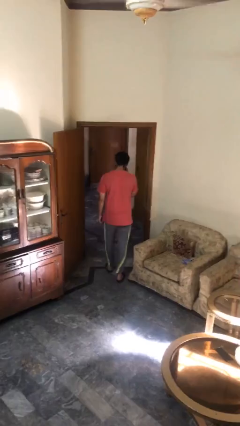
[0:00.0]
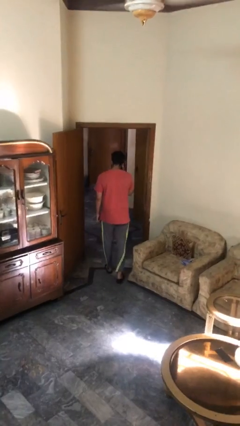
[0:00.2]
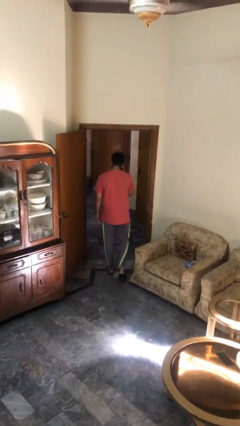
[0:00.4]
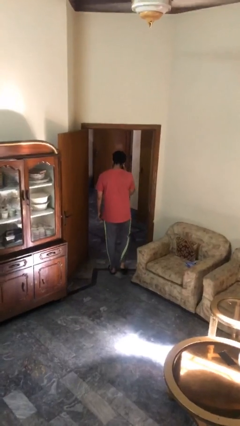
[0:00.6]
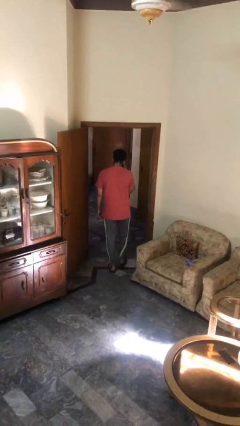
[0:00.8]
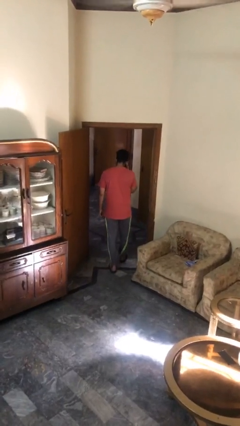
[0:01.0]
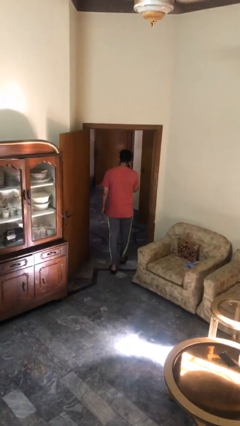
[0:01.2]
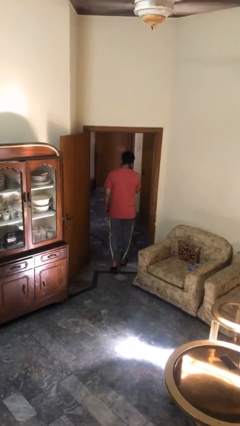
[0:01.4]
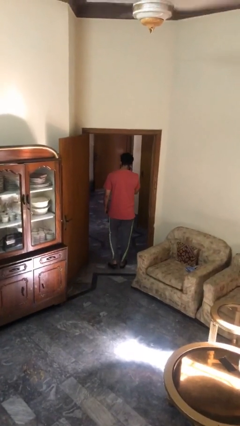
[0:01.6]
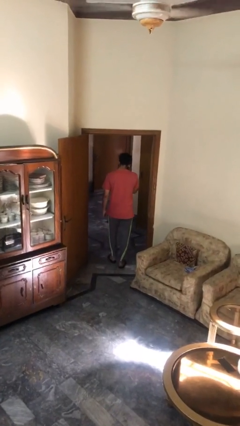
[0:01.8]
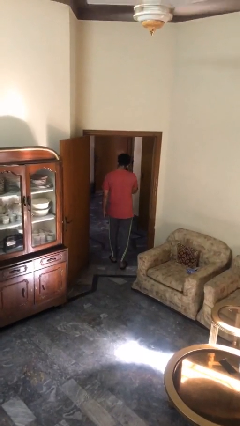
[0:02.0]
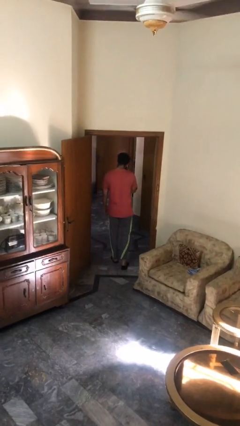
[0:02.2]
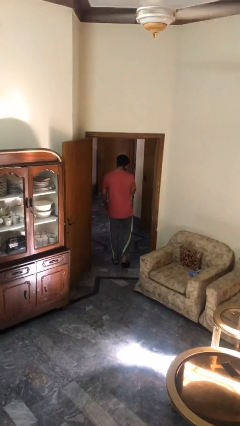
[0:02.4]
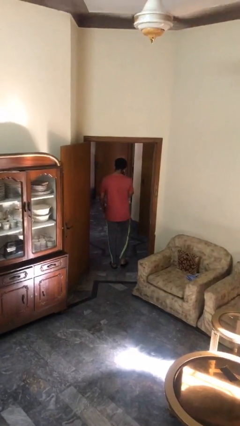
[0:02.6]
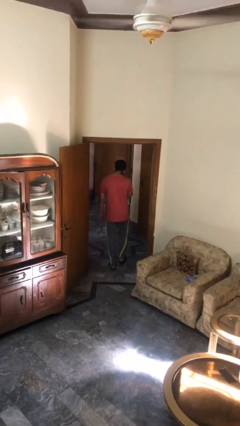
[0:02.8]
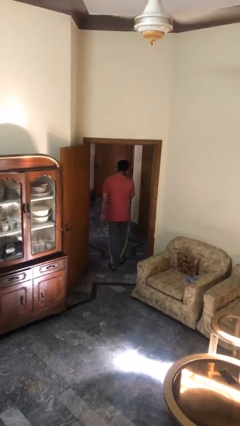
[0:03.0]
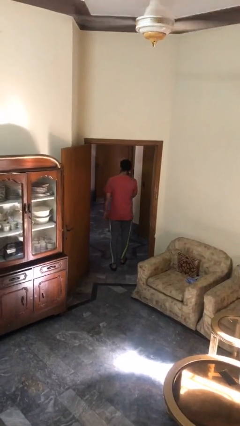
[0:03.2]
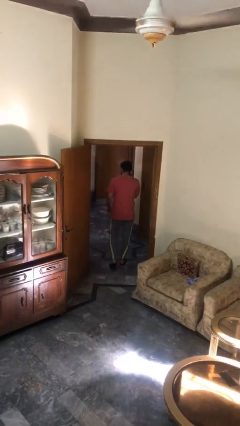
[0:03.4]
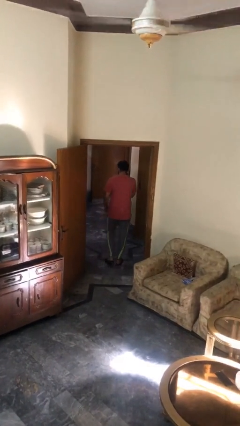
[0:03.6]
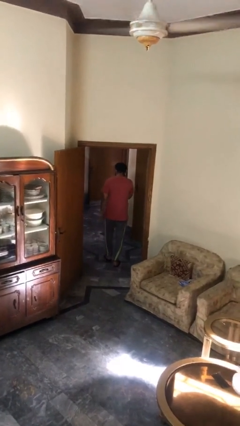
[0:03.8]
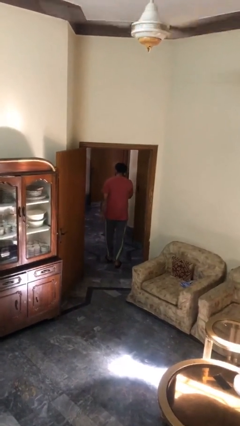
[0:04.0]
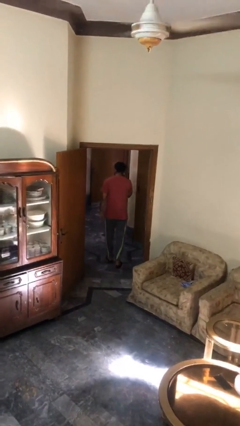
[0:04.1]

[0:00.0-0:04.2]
person exits scene through structure

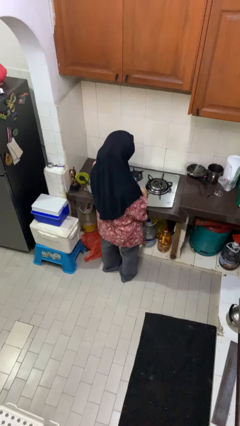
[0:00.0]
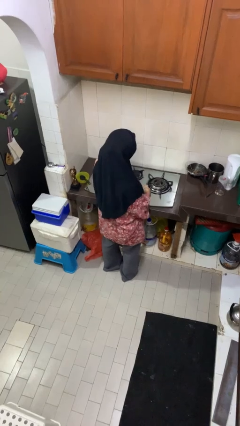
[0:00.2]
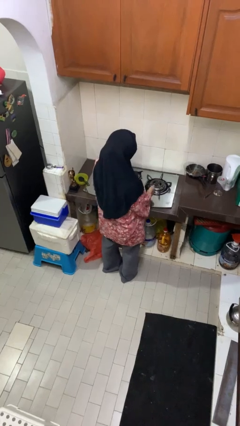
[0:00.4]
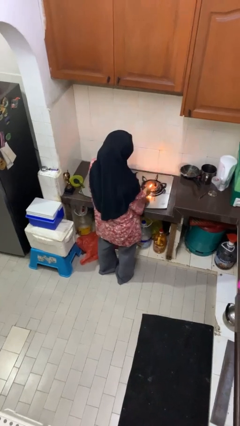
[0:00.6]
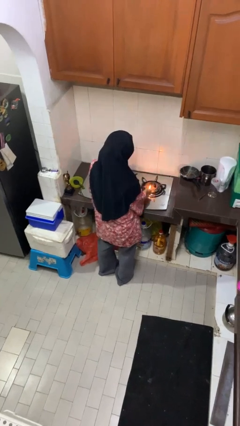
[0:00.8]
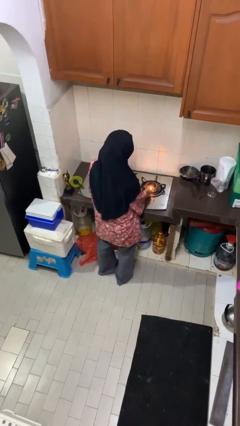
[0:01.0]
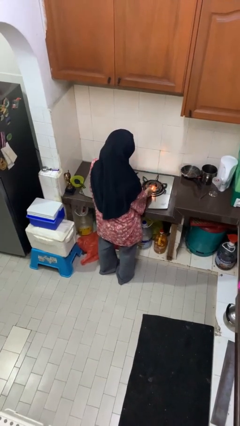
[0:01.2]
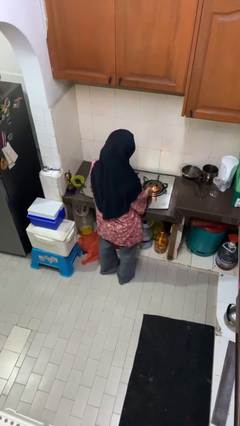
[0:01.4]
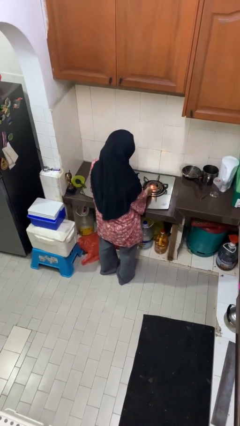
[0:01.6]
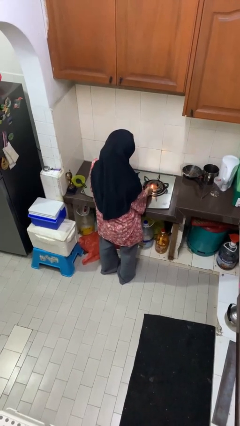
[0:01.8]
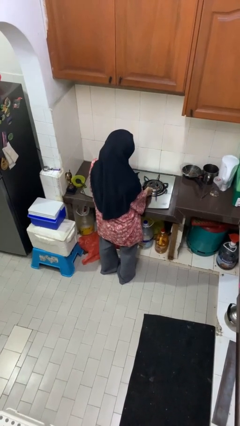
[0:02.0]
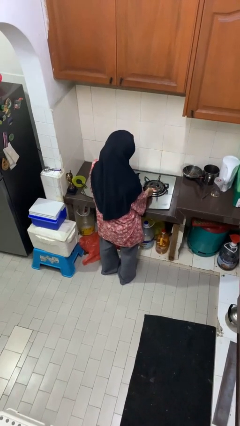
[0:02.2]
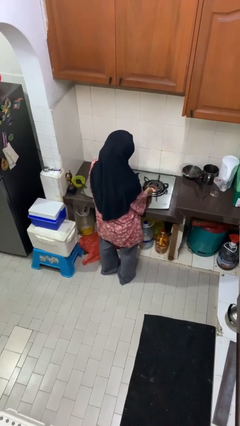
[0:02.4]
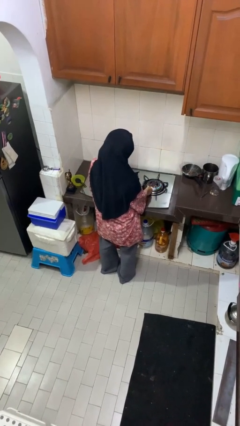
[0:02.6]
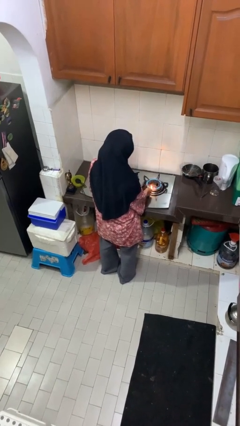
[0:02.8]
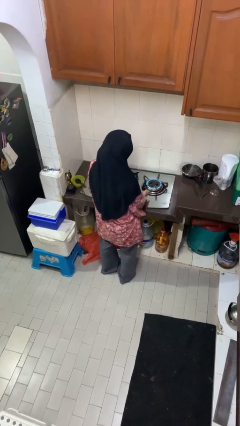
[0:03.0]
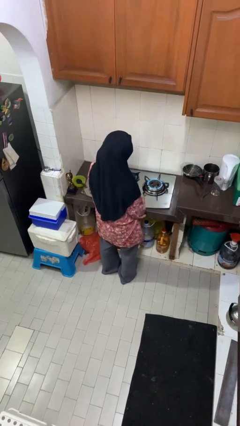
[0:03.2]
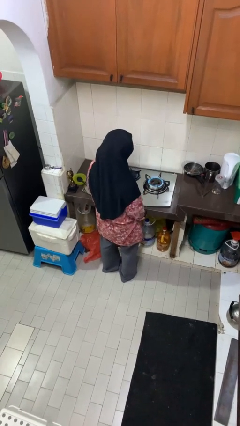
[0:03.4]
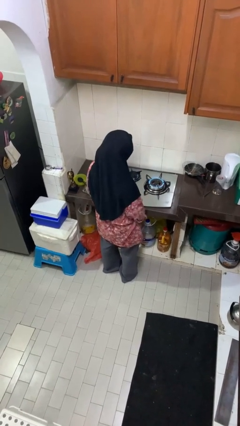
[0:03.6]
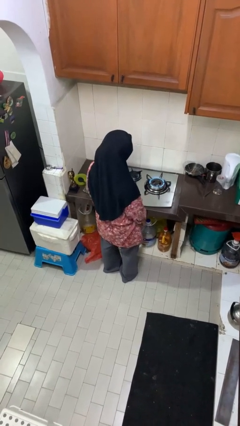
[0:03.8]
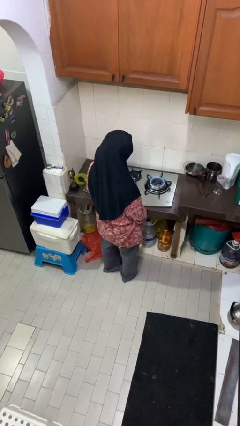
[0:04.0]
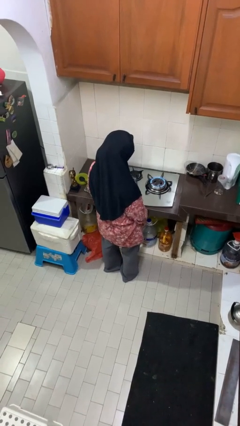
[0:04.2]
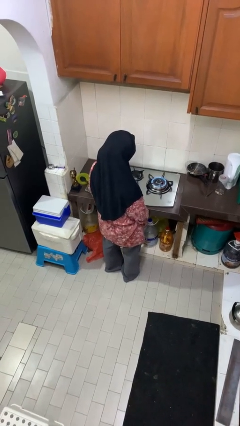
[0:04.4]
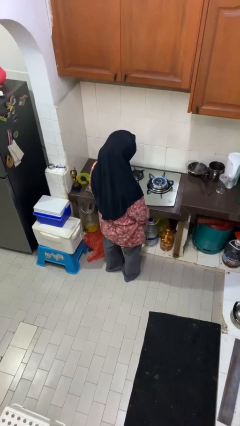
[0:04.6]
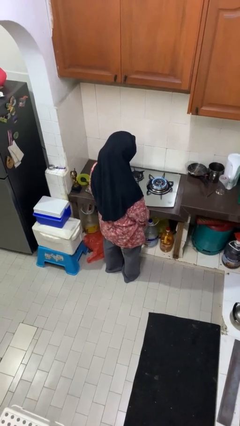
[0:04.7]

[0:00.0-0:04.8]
person turns on stovetop

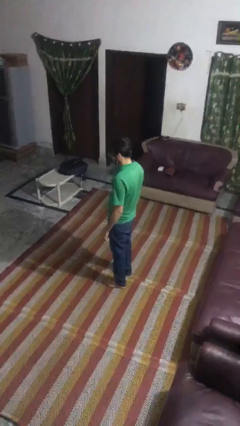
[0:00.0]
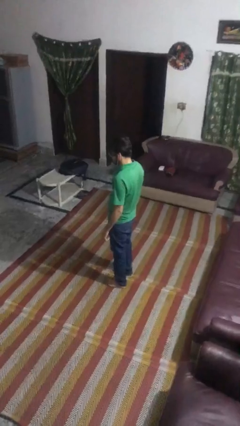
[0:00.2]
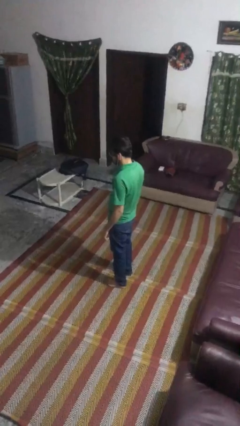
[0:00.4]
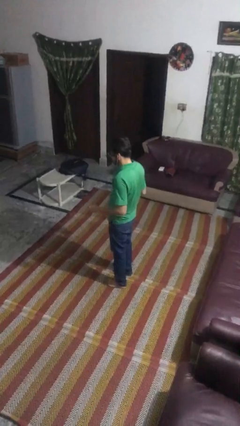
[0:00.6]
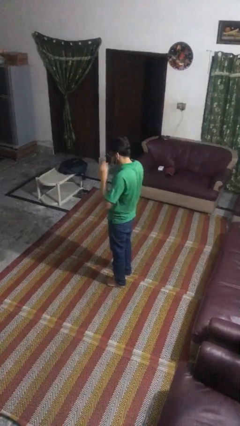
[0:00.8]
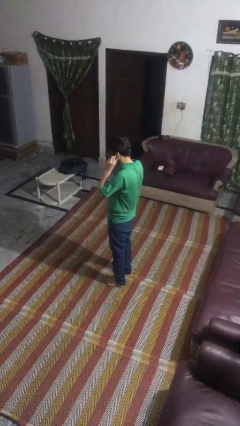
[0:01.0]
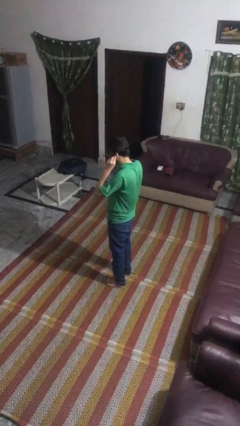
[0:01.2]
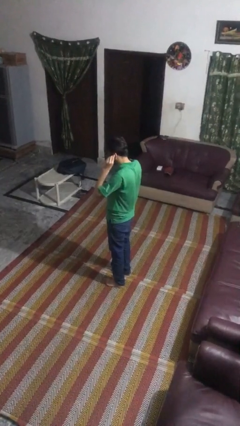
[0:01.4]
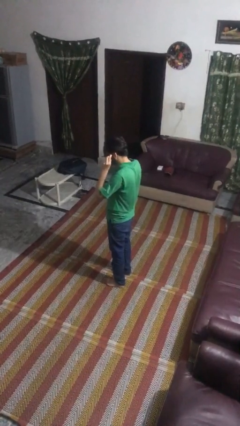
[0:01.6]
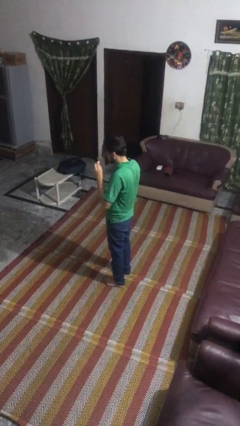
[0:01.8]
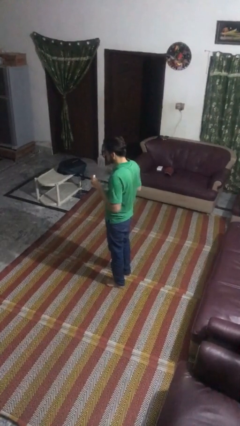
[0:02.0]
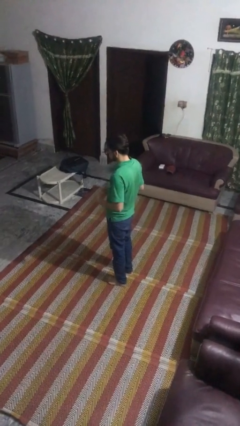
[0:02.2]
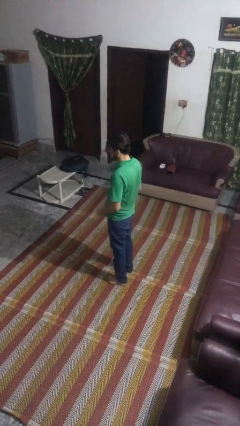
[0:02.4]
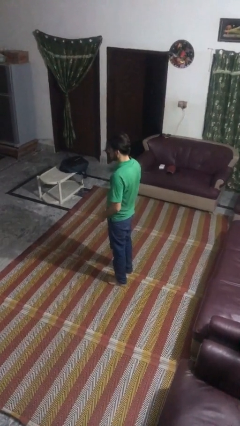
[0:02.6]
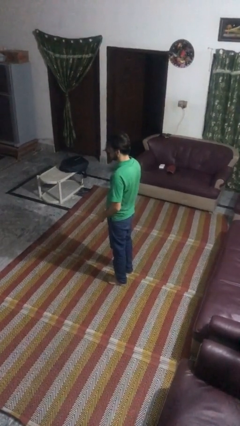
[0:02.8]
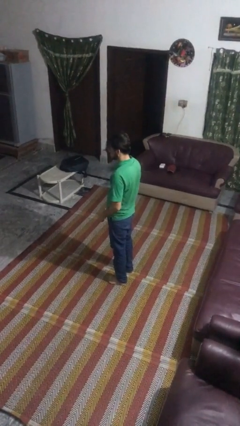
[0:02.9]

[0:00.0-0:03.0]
person takes off headphones

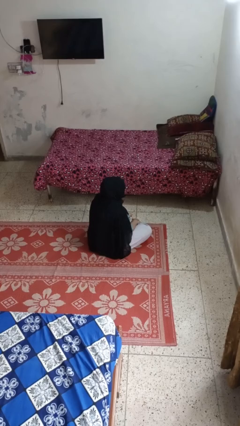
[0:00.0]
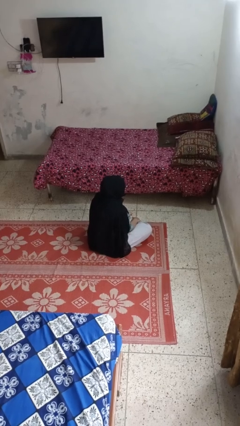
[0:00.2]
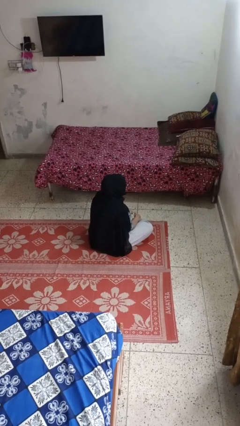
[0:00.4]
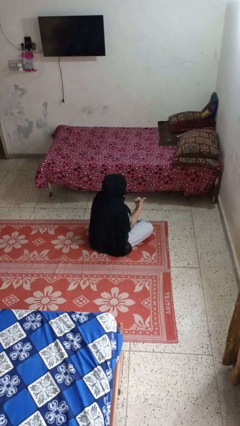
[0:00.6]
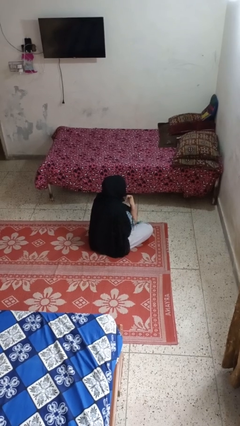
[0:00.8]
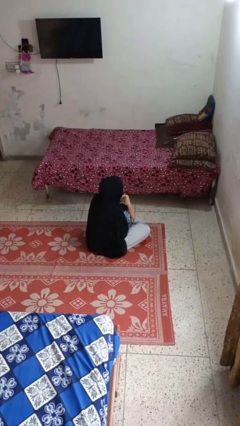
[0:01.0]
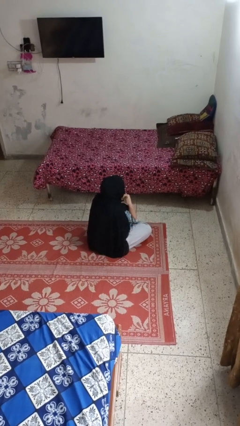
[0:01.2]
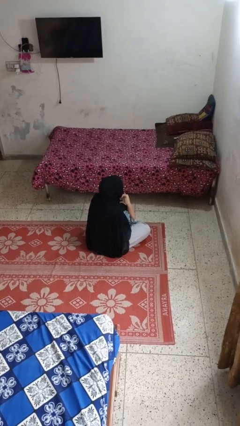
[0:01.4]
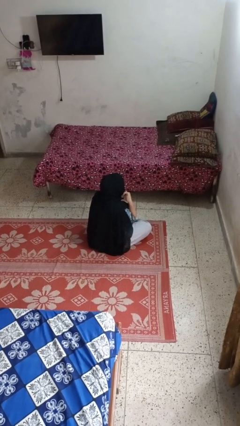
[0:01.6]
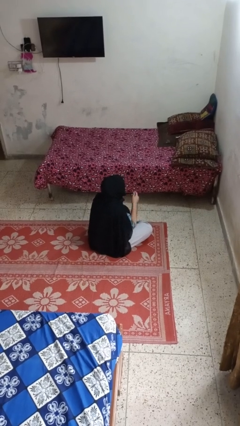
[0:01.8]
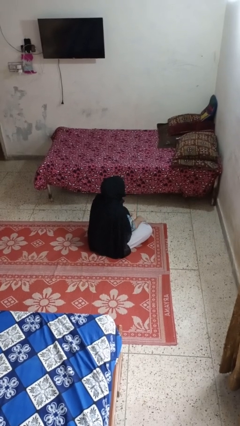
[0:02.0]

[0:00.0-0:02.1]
person gestures call me

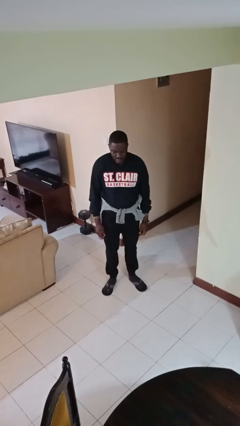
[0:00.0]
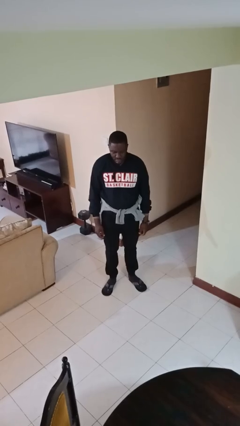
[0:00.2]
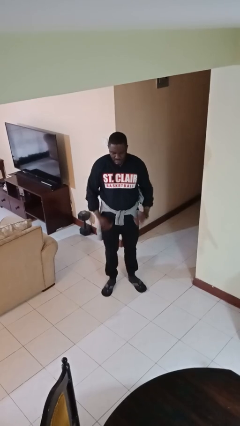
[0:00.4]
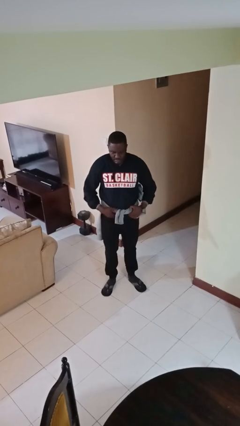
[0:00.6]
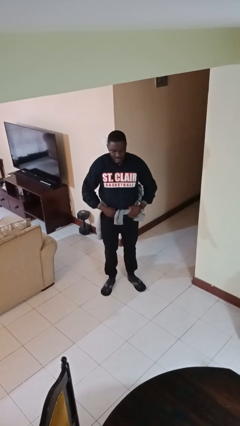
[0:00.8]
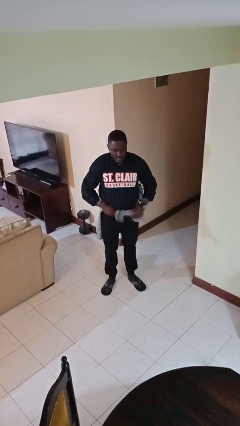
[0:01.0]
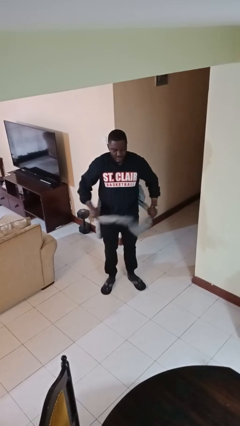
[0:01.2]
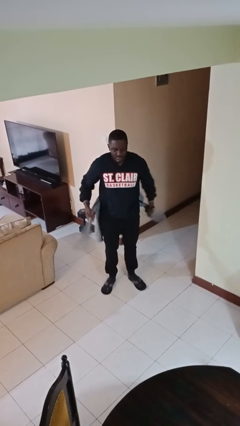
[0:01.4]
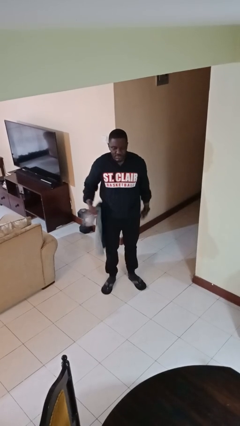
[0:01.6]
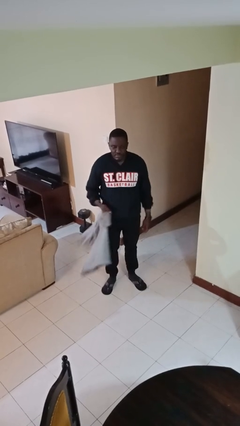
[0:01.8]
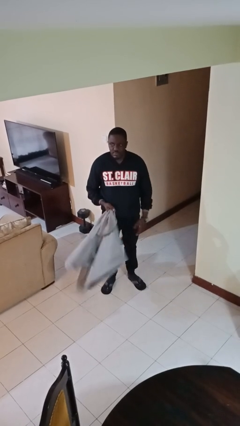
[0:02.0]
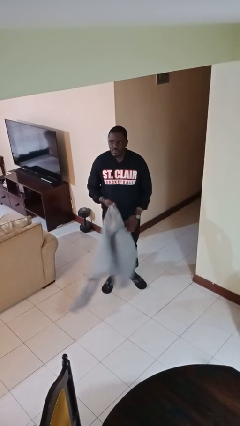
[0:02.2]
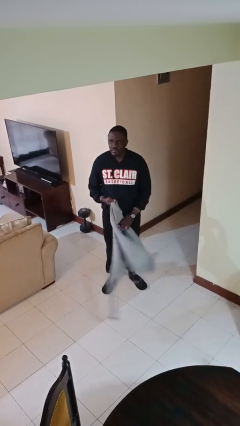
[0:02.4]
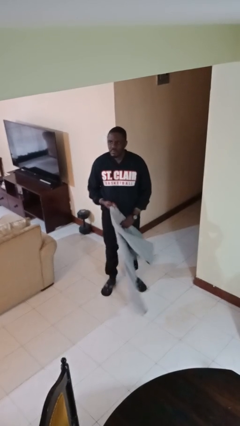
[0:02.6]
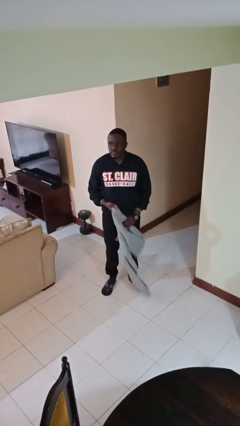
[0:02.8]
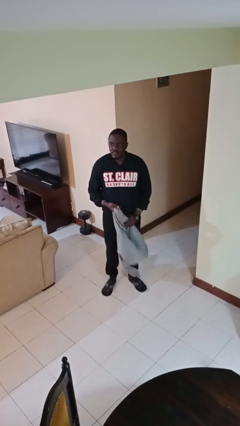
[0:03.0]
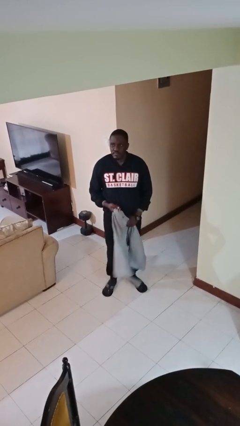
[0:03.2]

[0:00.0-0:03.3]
person unties jacket around waist
